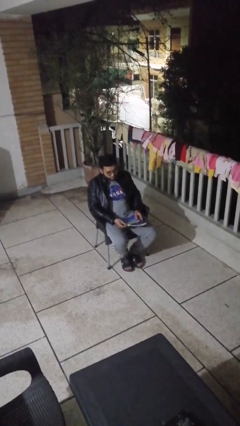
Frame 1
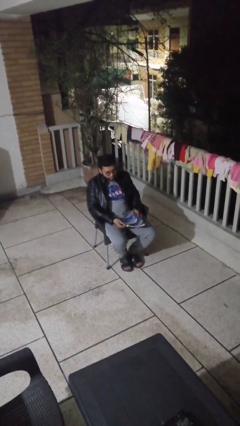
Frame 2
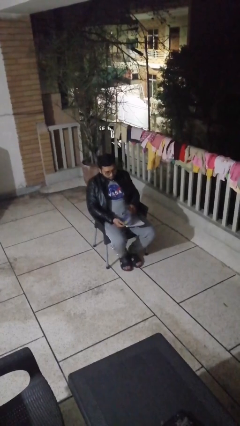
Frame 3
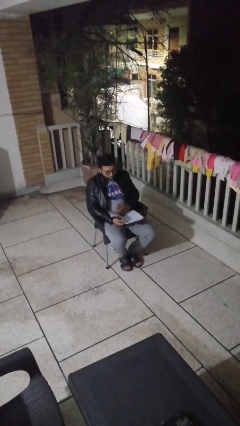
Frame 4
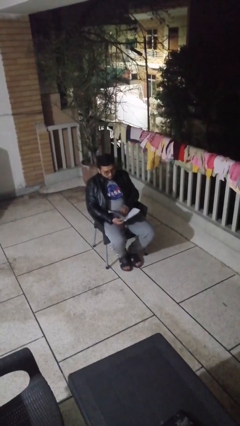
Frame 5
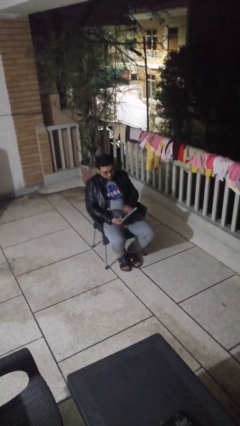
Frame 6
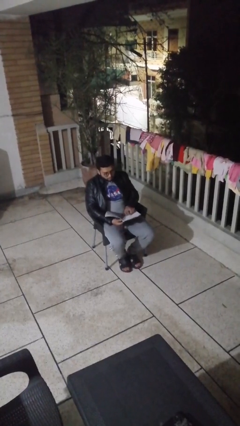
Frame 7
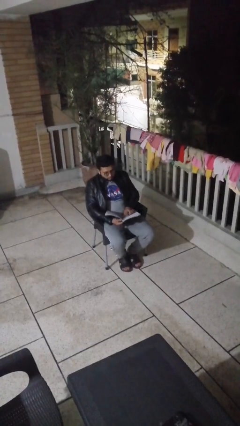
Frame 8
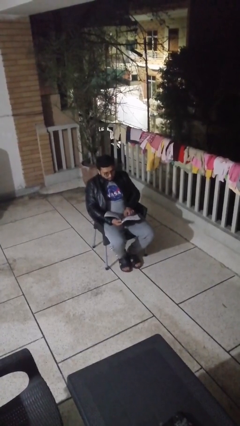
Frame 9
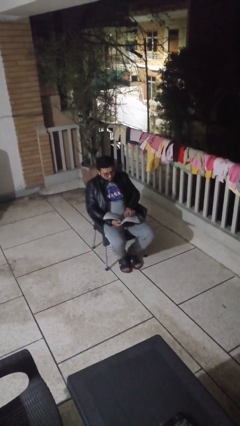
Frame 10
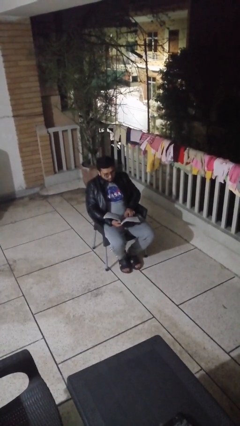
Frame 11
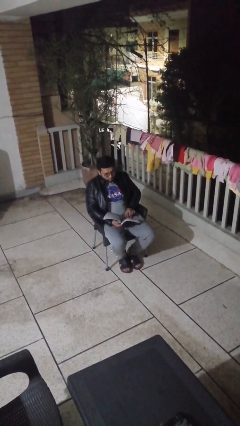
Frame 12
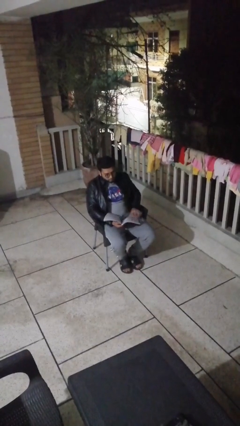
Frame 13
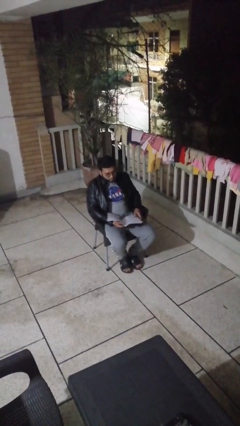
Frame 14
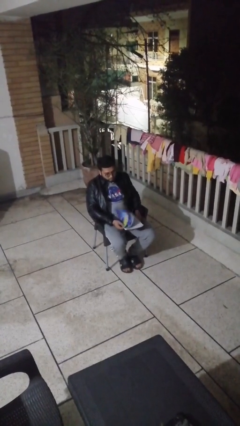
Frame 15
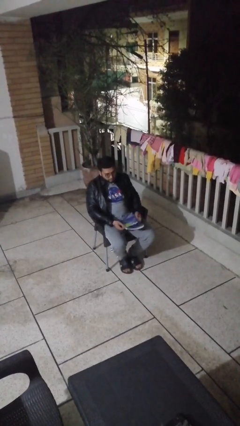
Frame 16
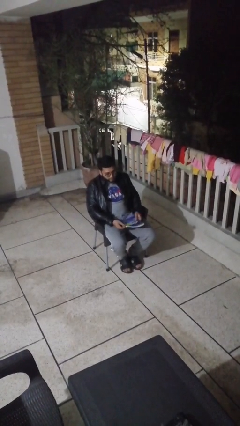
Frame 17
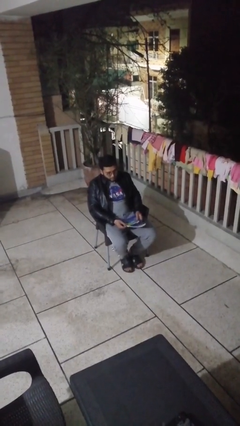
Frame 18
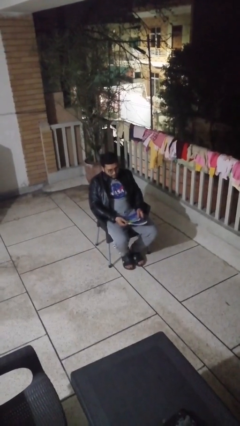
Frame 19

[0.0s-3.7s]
person reads document

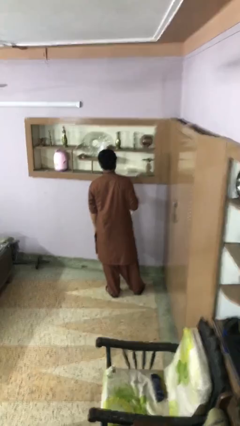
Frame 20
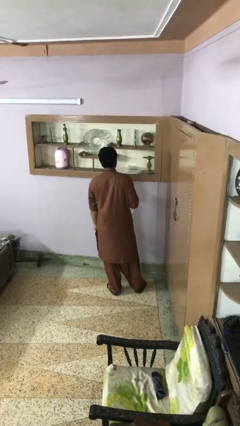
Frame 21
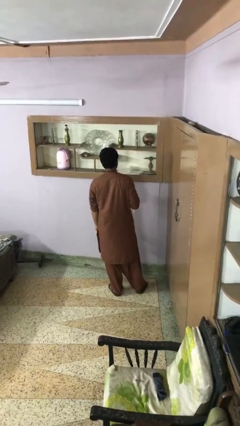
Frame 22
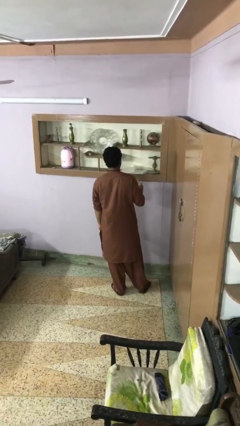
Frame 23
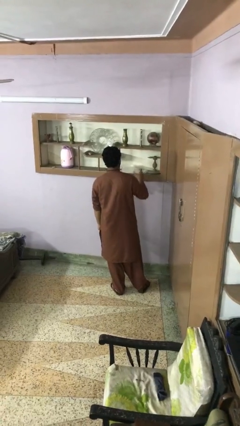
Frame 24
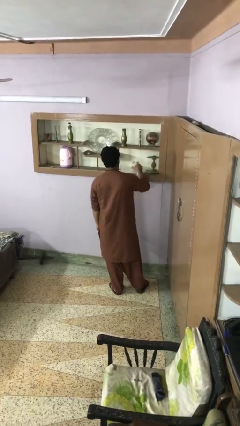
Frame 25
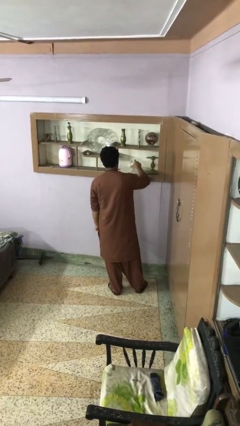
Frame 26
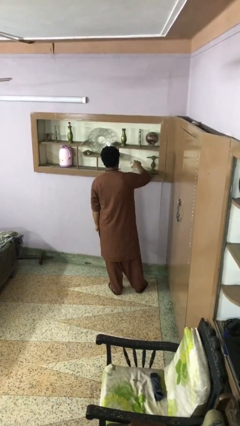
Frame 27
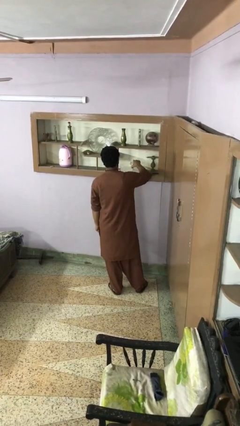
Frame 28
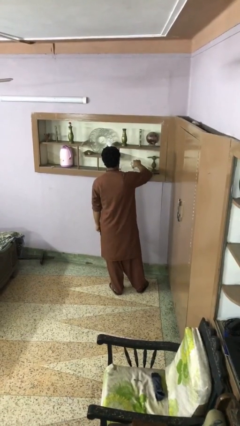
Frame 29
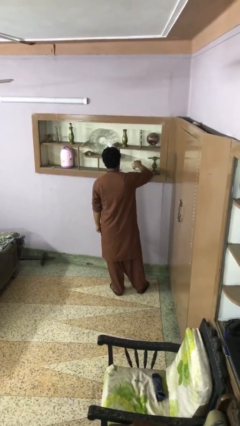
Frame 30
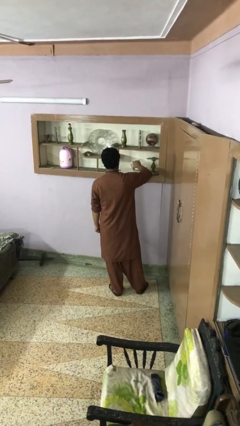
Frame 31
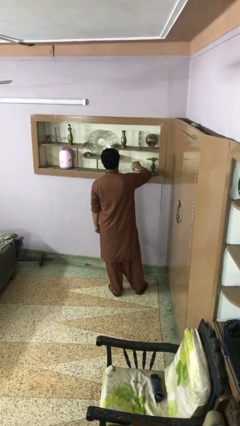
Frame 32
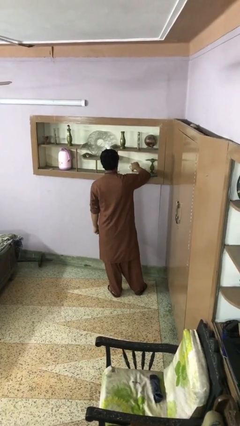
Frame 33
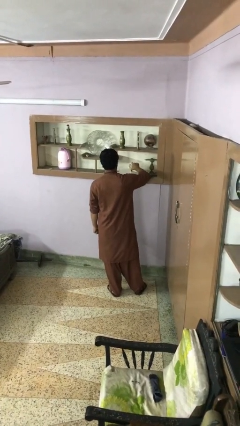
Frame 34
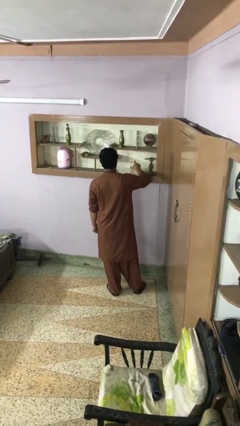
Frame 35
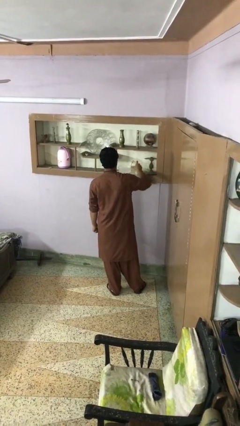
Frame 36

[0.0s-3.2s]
person pours into bowl

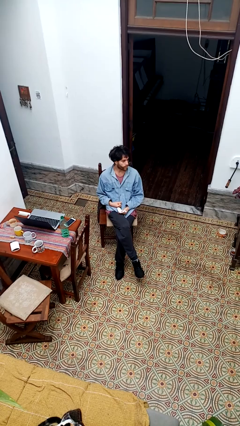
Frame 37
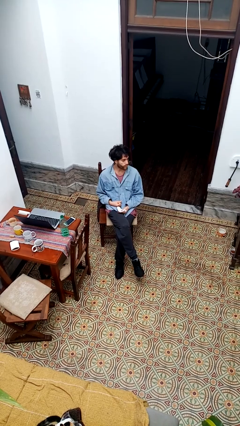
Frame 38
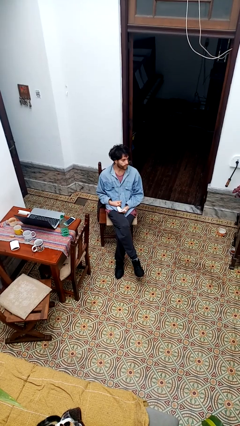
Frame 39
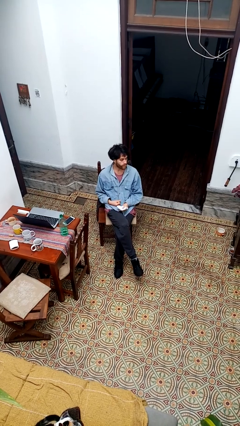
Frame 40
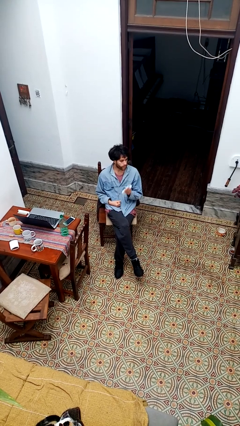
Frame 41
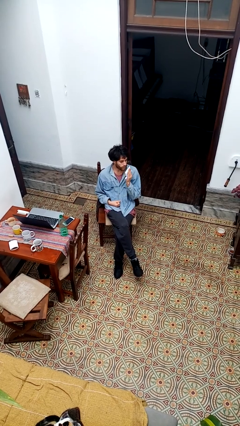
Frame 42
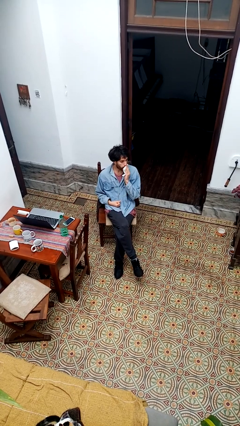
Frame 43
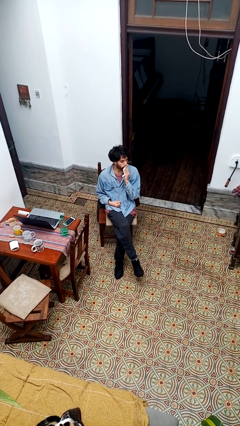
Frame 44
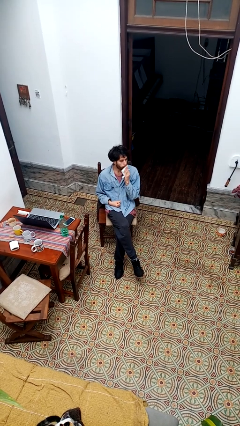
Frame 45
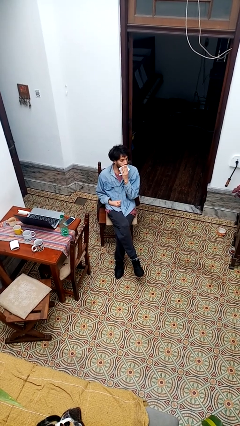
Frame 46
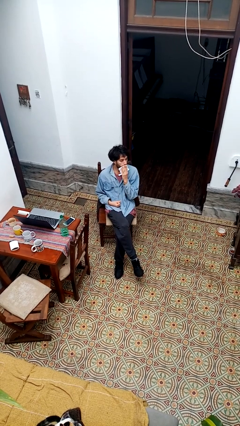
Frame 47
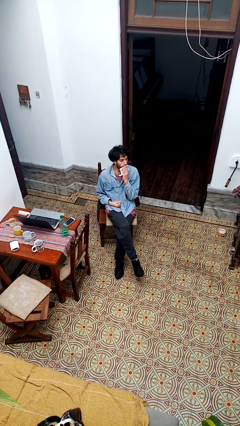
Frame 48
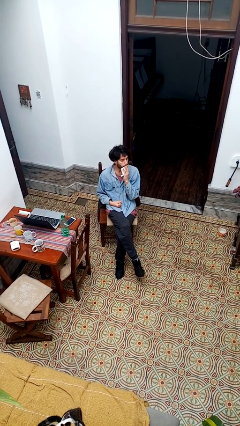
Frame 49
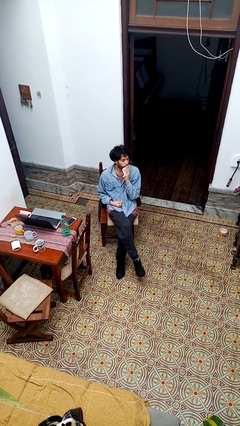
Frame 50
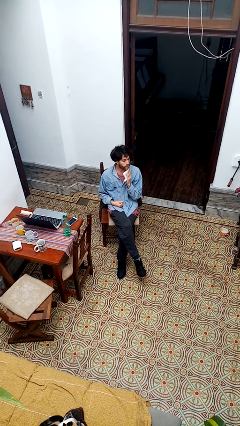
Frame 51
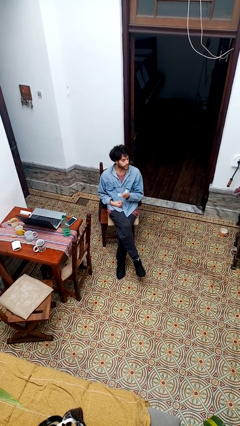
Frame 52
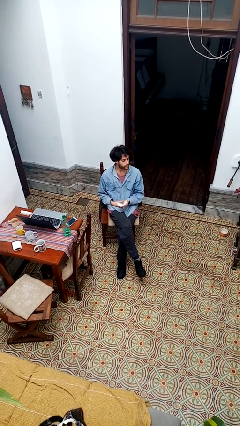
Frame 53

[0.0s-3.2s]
person wipes mouth with napkin

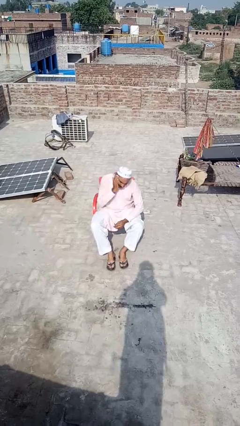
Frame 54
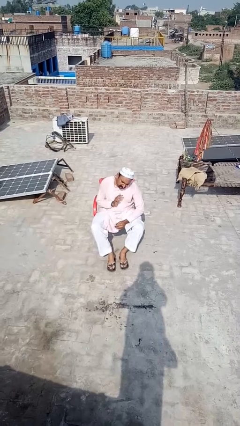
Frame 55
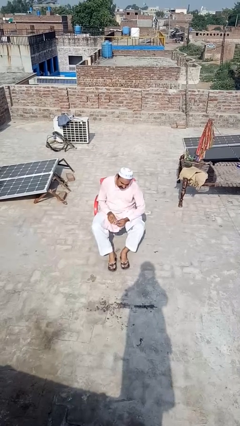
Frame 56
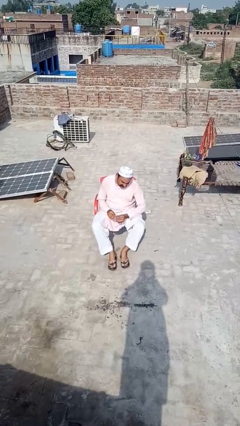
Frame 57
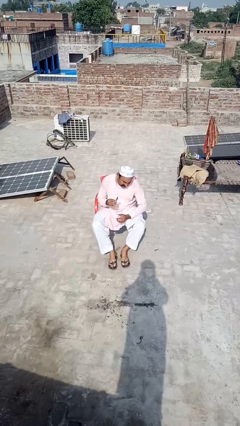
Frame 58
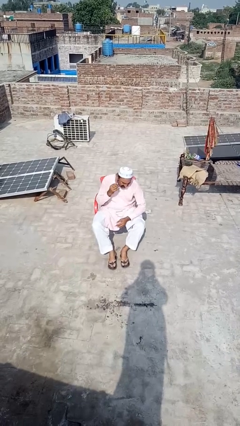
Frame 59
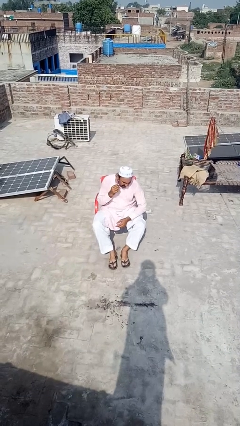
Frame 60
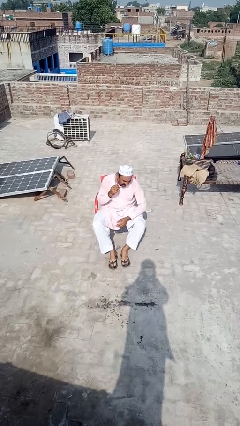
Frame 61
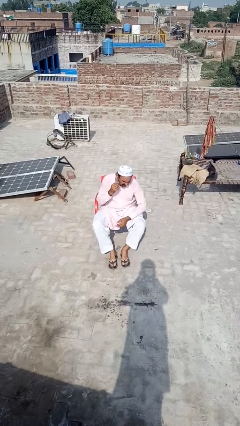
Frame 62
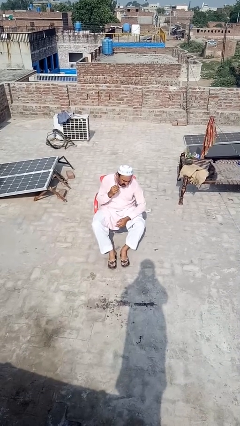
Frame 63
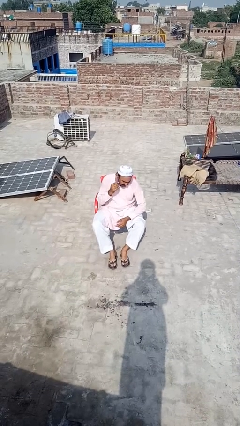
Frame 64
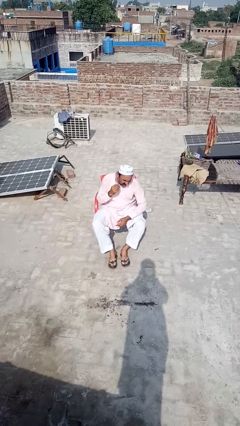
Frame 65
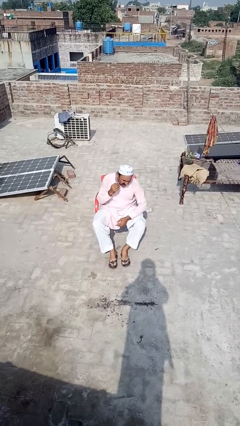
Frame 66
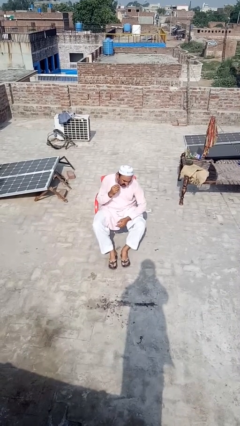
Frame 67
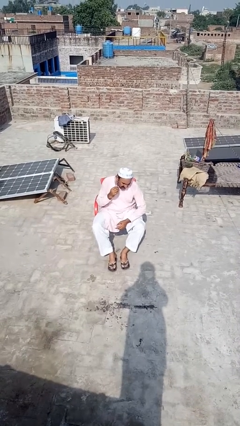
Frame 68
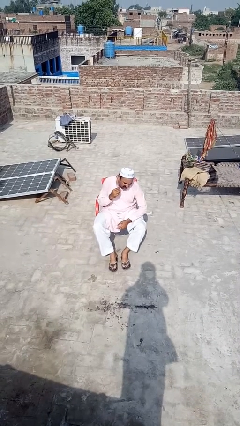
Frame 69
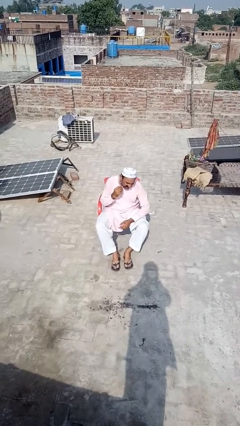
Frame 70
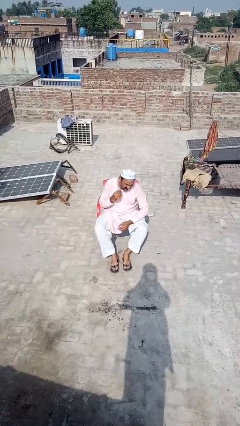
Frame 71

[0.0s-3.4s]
person shaves face

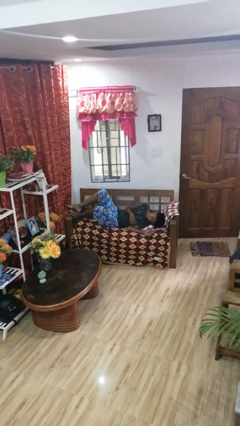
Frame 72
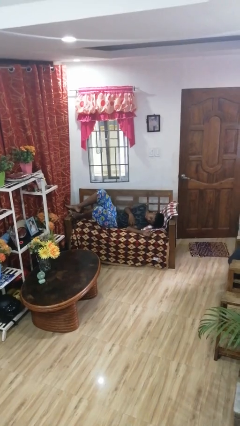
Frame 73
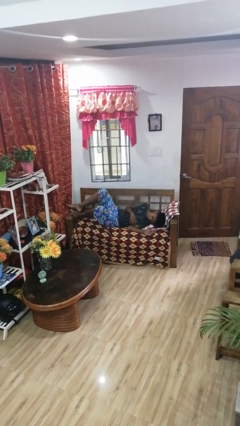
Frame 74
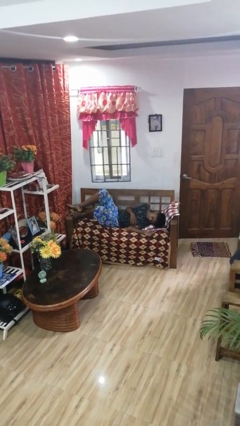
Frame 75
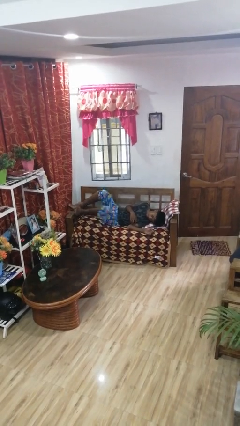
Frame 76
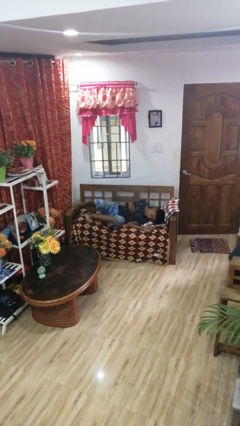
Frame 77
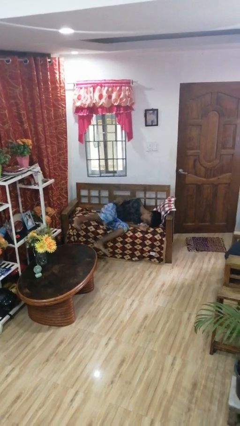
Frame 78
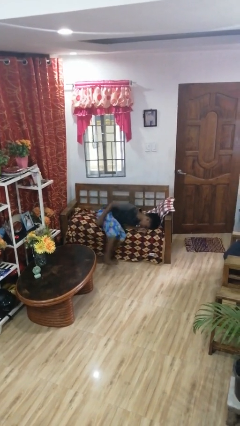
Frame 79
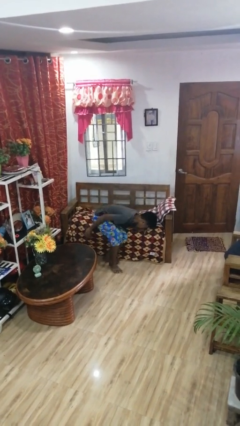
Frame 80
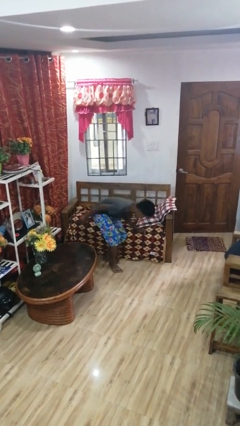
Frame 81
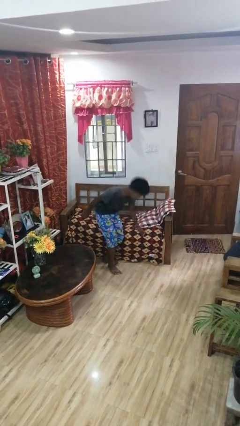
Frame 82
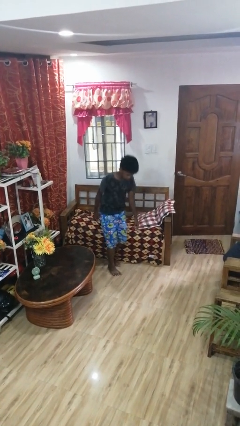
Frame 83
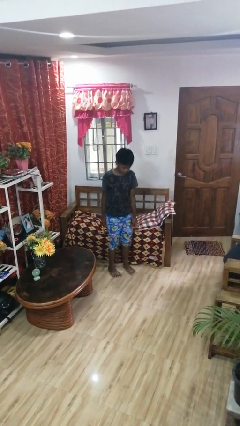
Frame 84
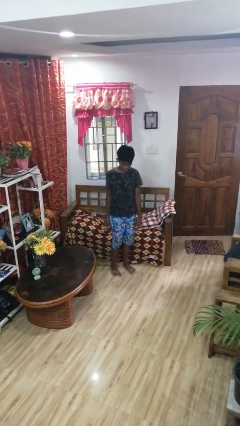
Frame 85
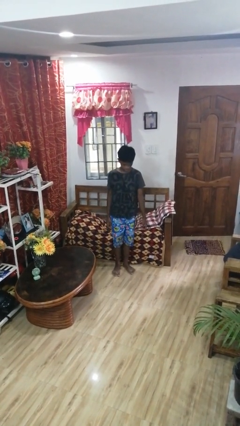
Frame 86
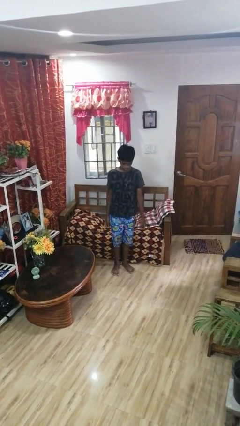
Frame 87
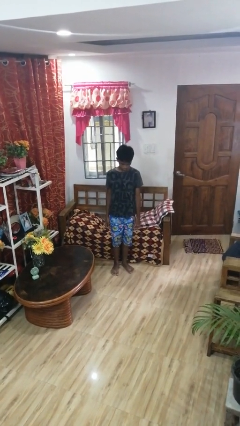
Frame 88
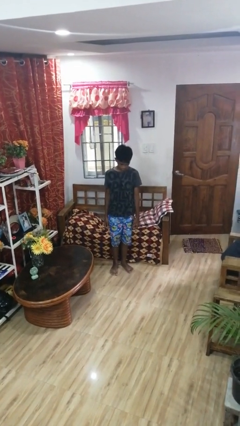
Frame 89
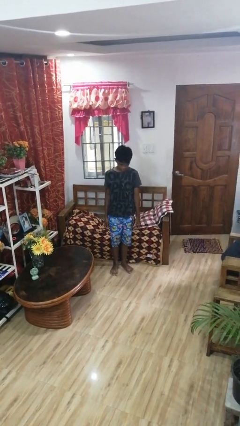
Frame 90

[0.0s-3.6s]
person stands up

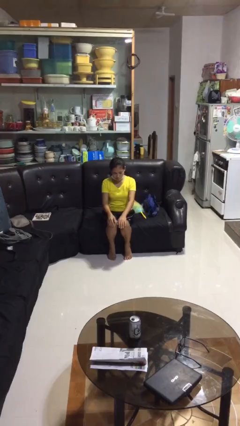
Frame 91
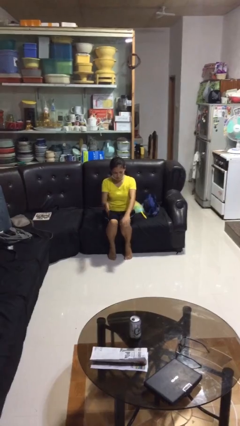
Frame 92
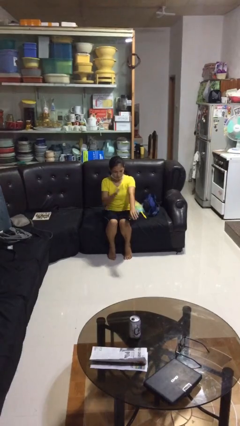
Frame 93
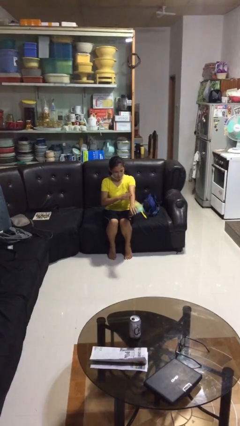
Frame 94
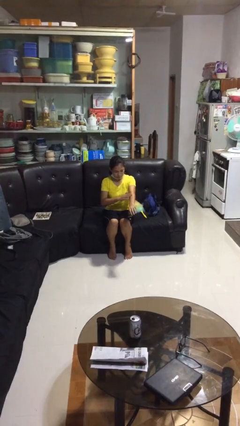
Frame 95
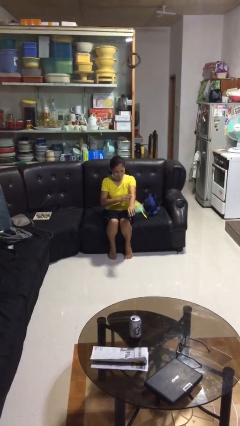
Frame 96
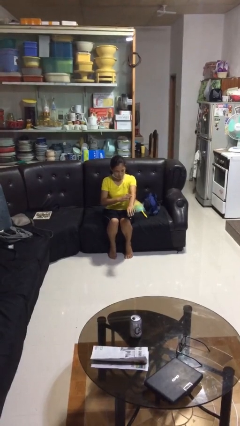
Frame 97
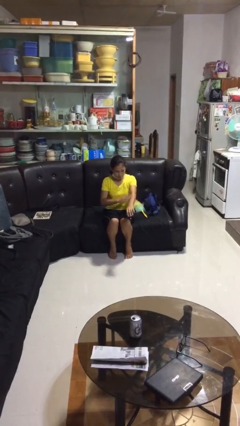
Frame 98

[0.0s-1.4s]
person swats bug
